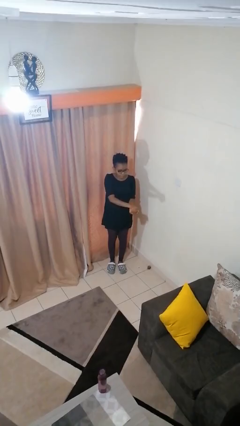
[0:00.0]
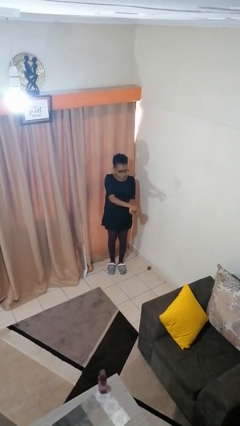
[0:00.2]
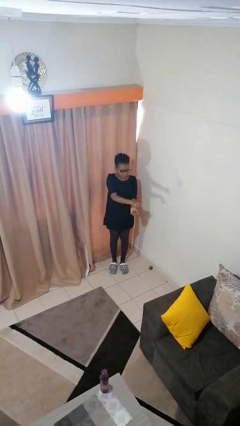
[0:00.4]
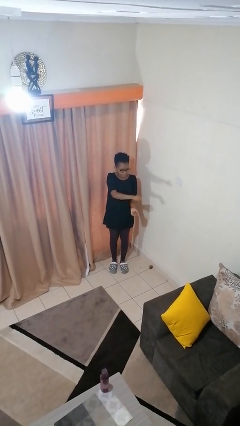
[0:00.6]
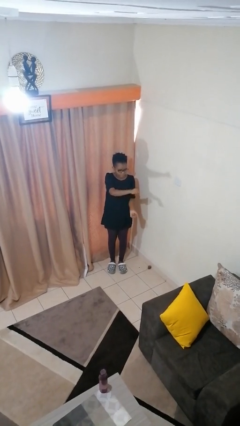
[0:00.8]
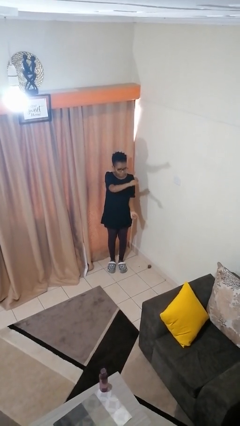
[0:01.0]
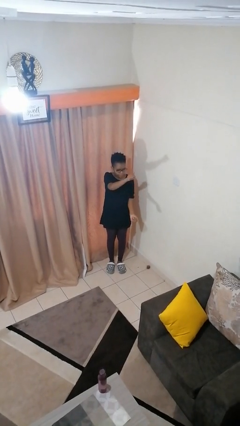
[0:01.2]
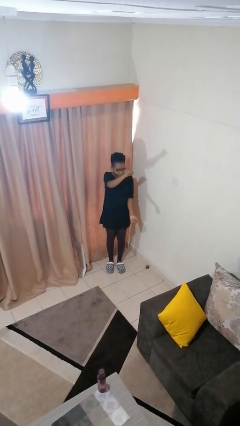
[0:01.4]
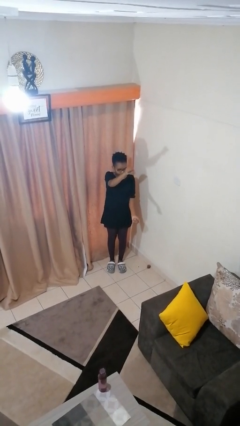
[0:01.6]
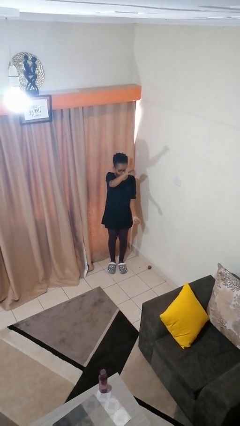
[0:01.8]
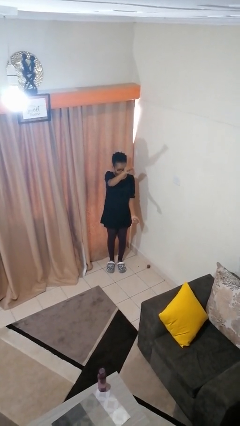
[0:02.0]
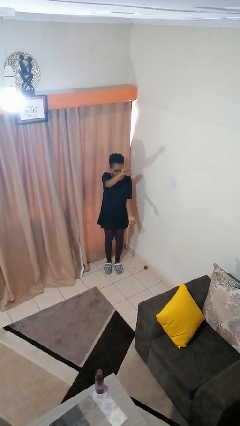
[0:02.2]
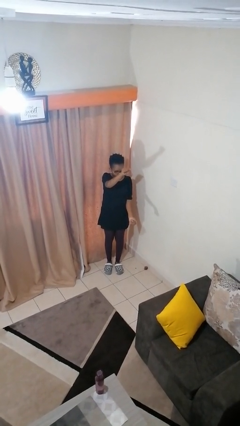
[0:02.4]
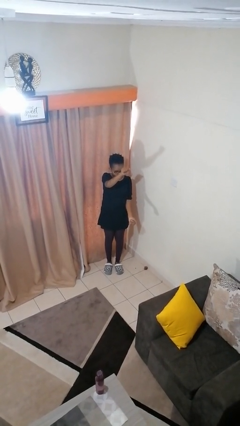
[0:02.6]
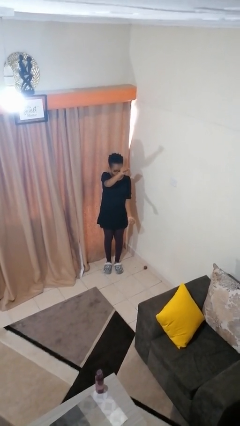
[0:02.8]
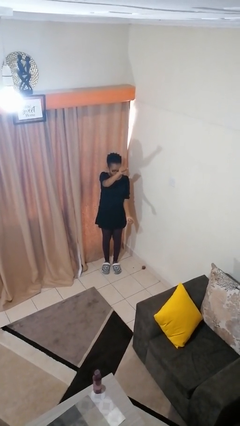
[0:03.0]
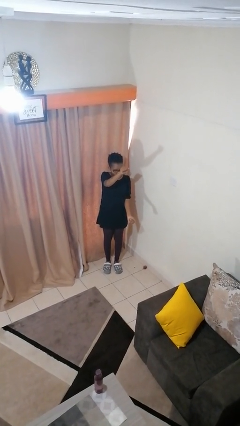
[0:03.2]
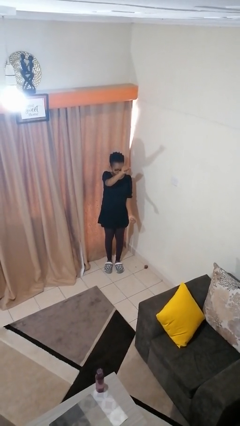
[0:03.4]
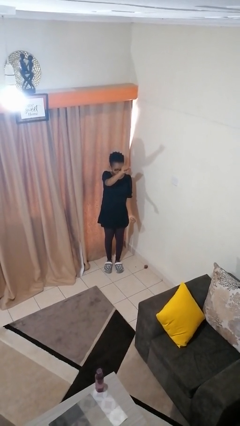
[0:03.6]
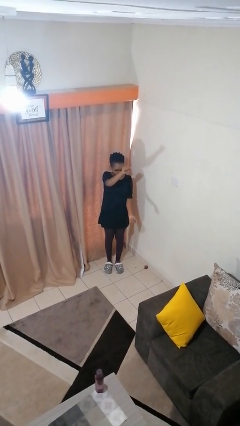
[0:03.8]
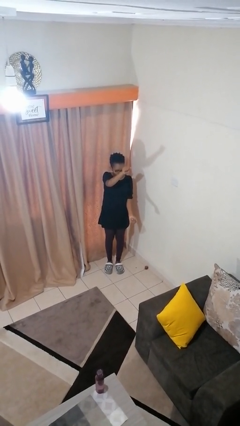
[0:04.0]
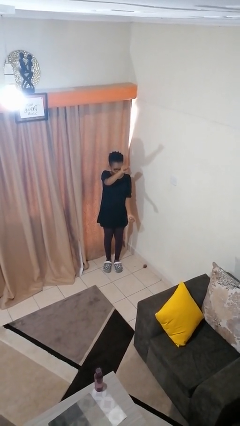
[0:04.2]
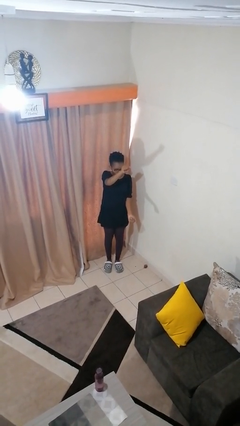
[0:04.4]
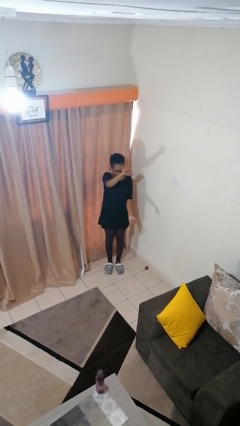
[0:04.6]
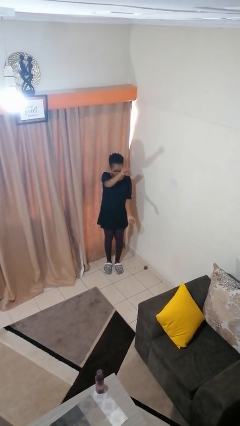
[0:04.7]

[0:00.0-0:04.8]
person gestures zoom in

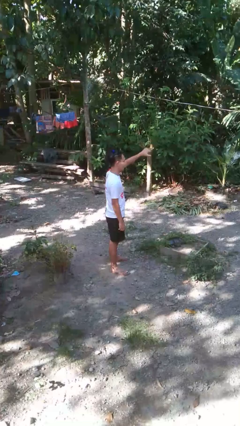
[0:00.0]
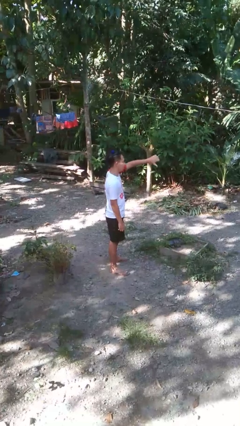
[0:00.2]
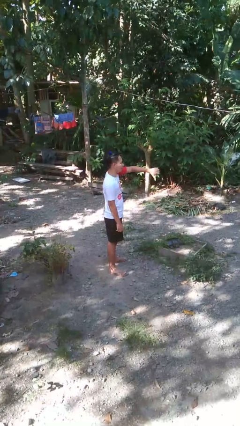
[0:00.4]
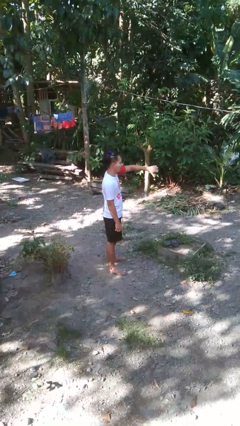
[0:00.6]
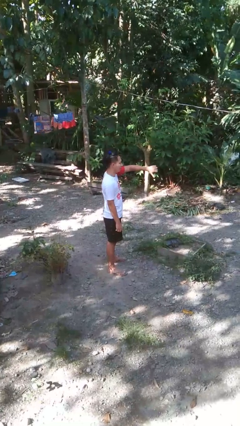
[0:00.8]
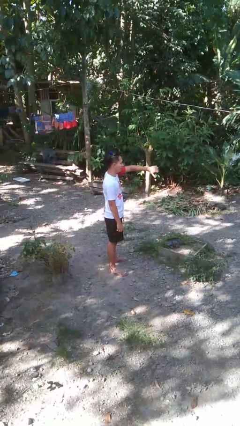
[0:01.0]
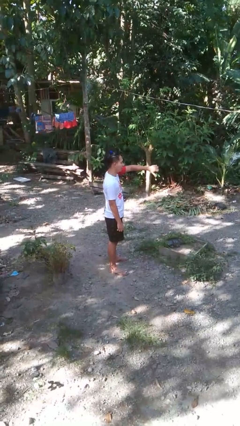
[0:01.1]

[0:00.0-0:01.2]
person gestures thumbs down

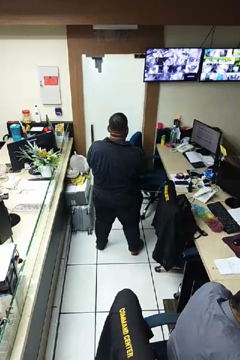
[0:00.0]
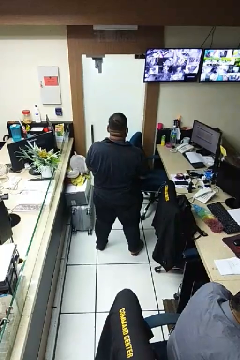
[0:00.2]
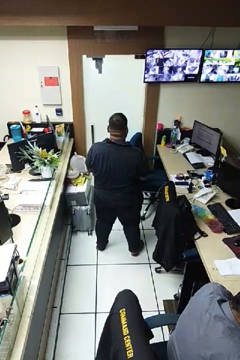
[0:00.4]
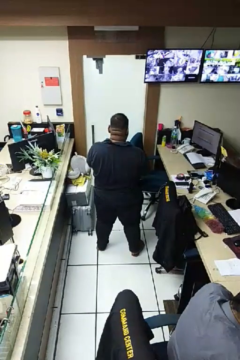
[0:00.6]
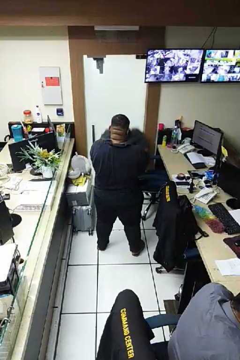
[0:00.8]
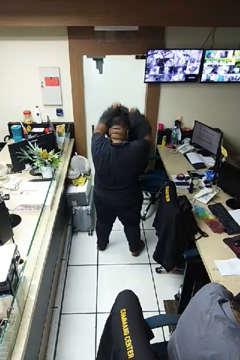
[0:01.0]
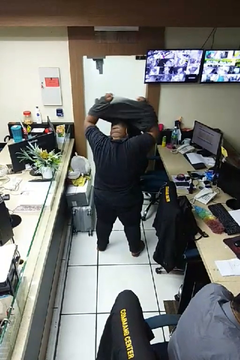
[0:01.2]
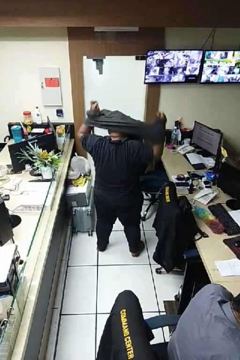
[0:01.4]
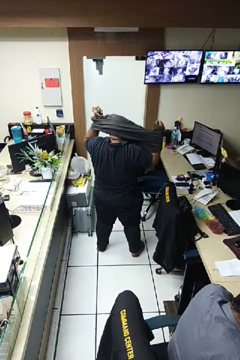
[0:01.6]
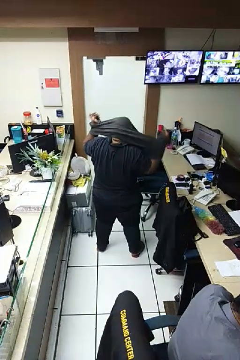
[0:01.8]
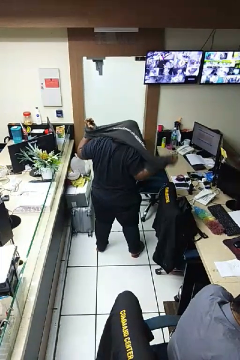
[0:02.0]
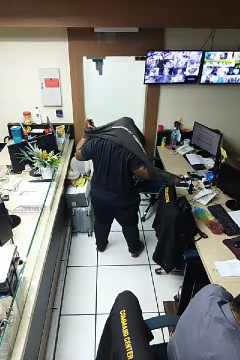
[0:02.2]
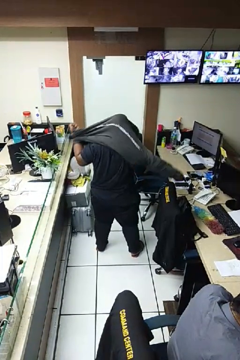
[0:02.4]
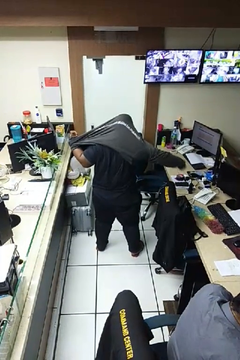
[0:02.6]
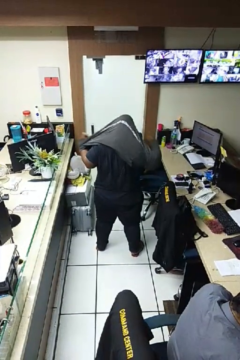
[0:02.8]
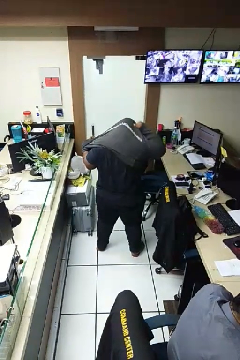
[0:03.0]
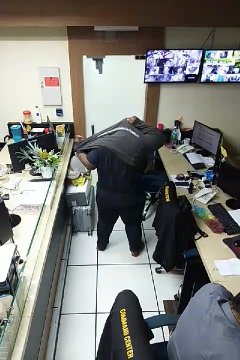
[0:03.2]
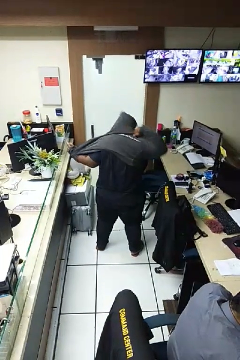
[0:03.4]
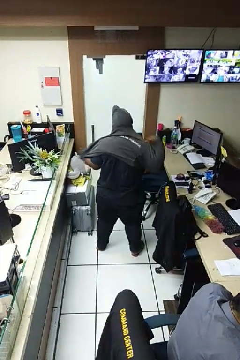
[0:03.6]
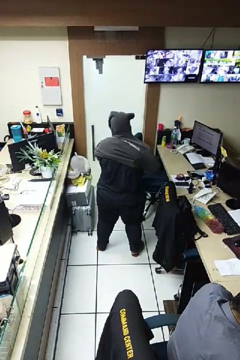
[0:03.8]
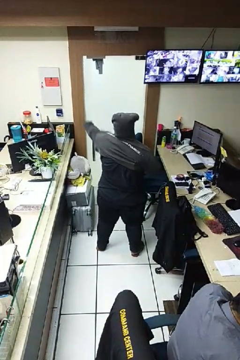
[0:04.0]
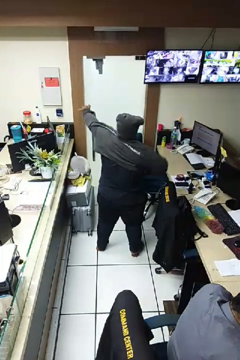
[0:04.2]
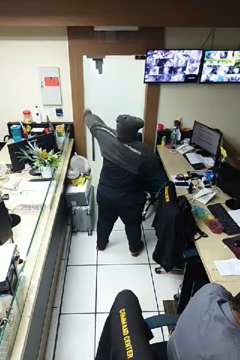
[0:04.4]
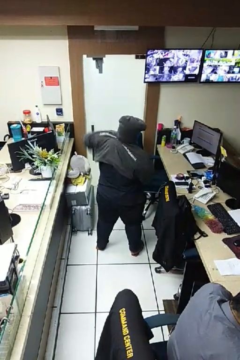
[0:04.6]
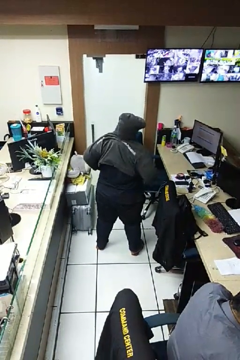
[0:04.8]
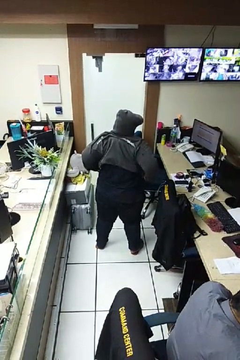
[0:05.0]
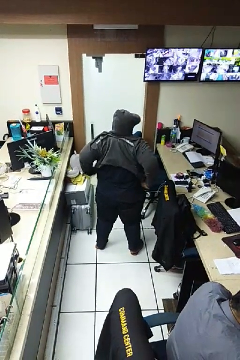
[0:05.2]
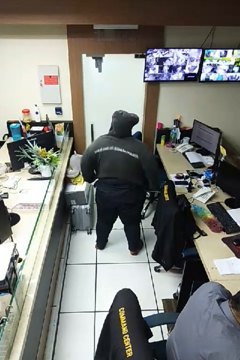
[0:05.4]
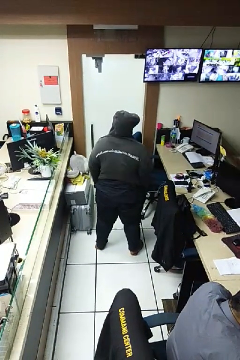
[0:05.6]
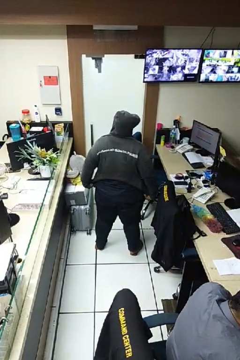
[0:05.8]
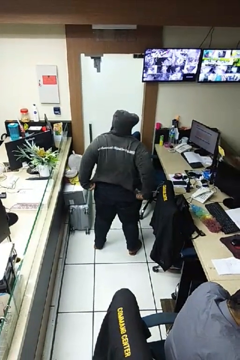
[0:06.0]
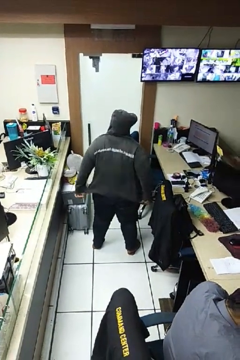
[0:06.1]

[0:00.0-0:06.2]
person puts on hoodie

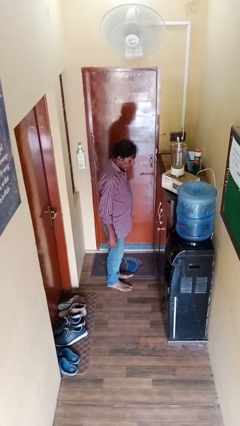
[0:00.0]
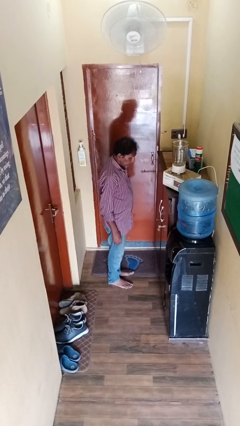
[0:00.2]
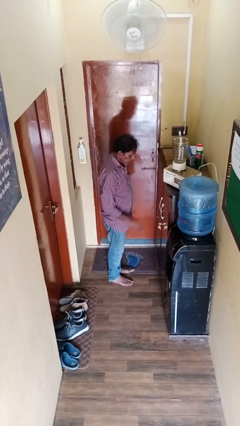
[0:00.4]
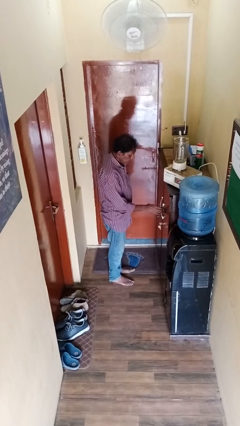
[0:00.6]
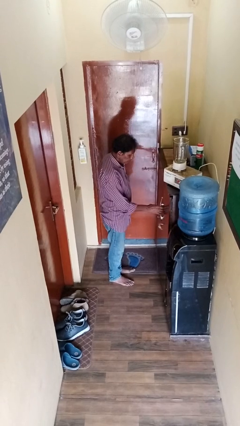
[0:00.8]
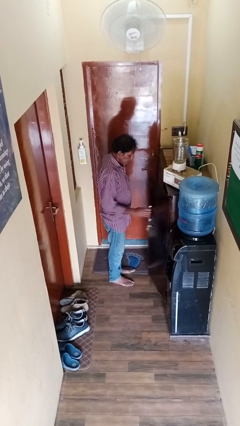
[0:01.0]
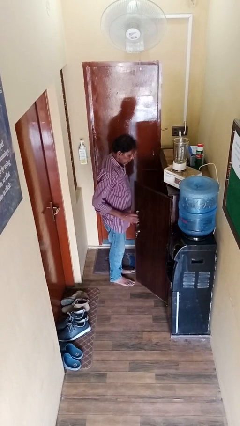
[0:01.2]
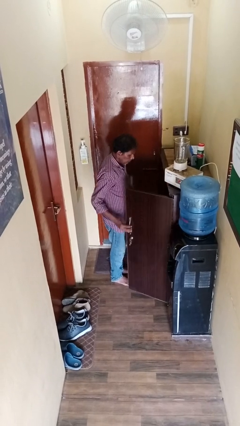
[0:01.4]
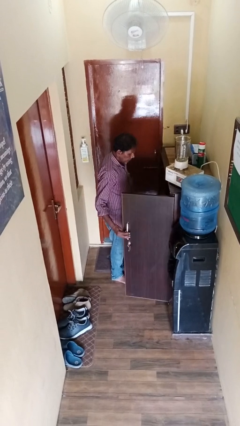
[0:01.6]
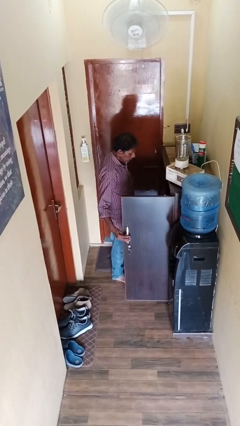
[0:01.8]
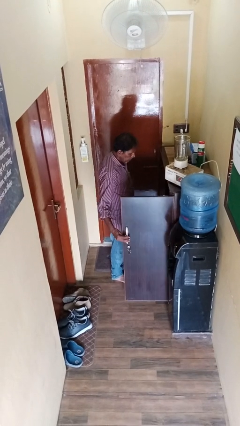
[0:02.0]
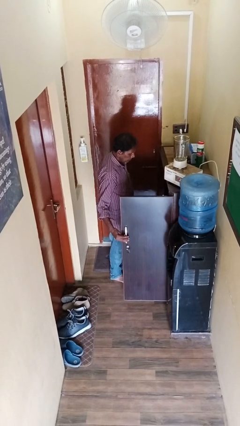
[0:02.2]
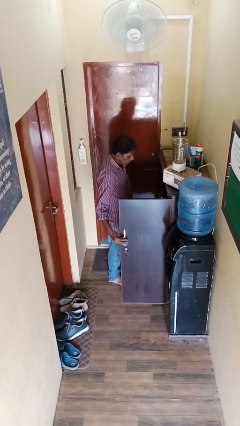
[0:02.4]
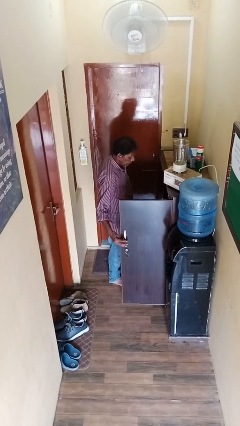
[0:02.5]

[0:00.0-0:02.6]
person opens cabinet

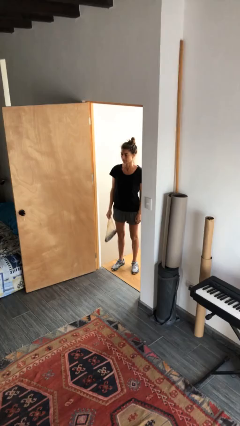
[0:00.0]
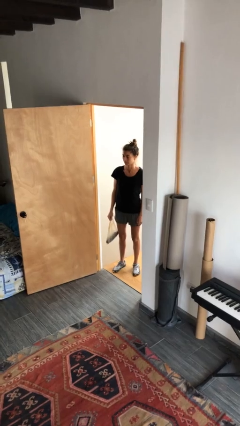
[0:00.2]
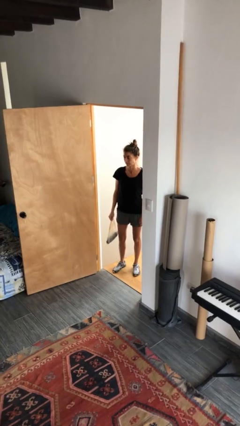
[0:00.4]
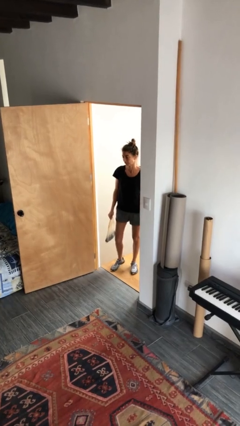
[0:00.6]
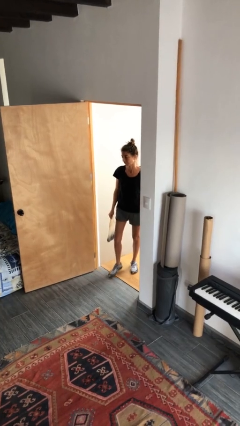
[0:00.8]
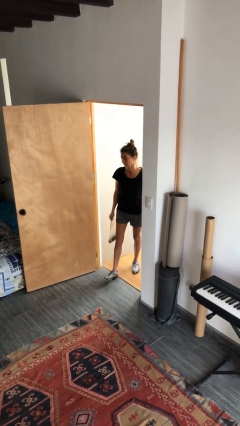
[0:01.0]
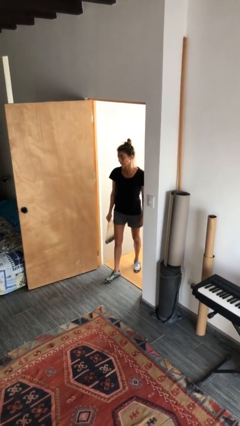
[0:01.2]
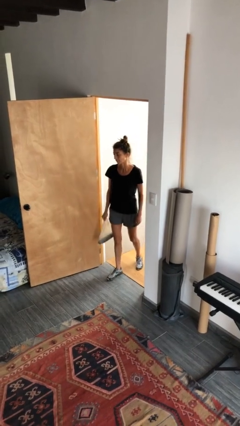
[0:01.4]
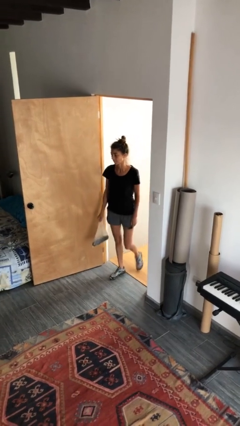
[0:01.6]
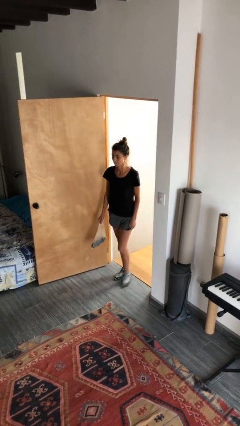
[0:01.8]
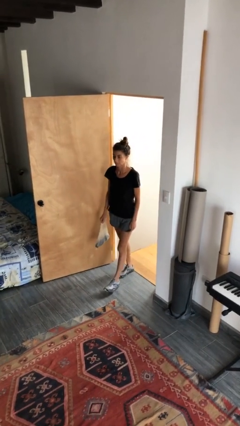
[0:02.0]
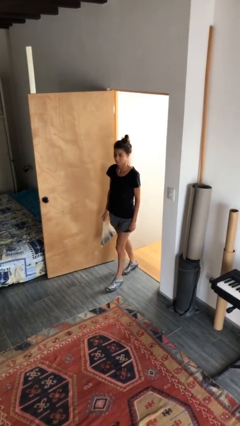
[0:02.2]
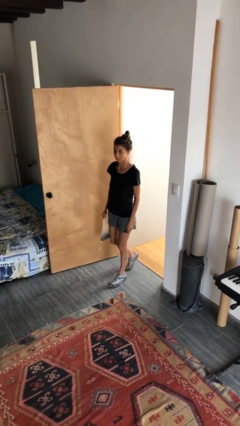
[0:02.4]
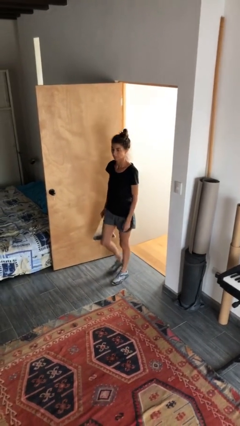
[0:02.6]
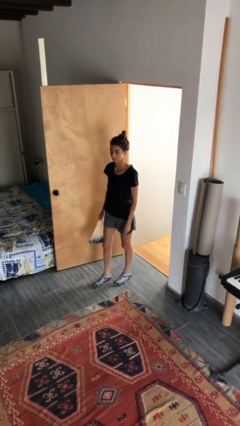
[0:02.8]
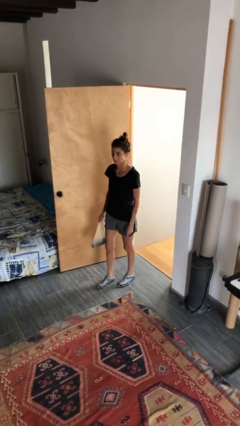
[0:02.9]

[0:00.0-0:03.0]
person carries groceries

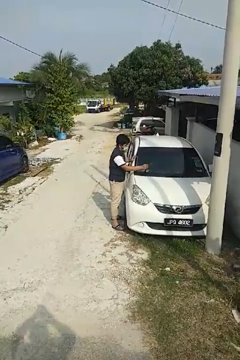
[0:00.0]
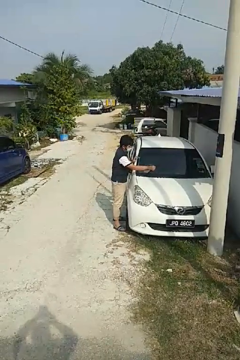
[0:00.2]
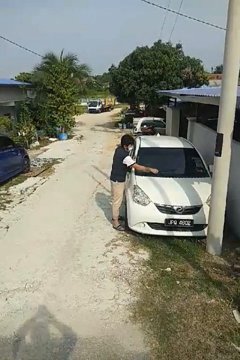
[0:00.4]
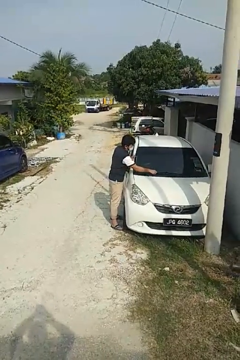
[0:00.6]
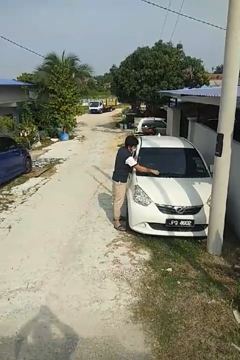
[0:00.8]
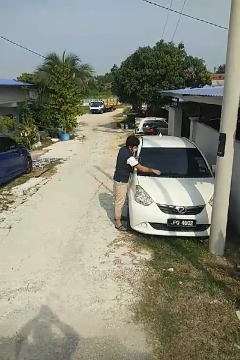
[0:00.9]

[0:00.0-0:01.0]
person flips down car wipers
